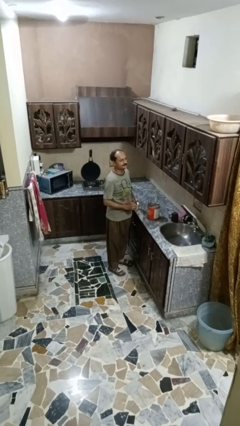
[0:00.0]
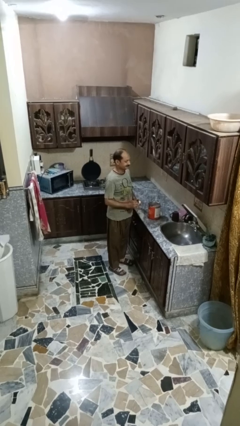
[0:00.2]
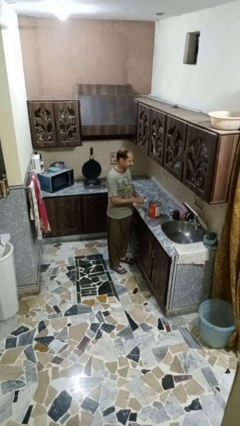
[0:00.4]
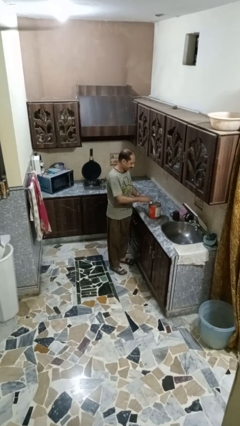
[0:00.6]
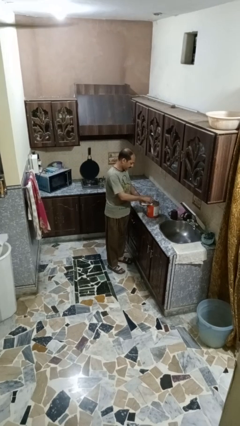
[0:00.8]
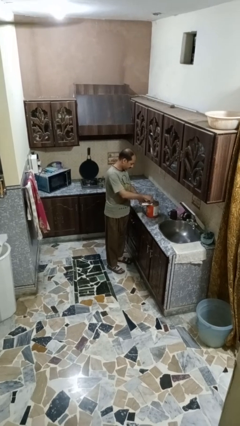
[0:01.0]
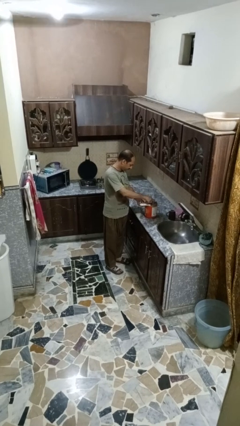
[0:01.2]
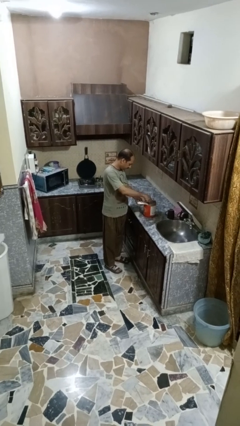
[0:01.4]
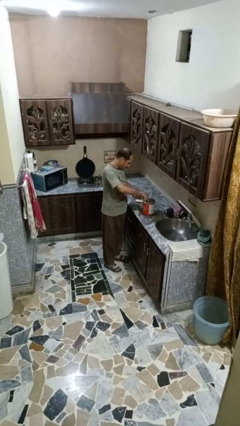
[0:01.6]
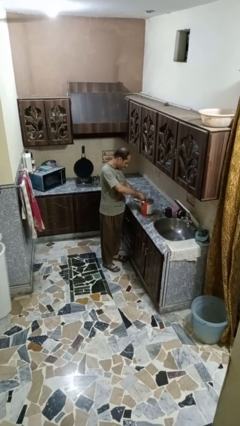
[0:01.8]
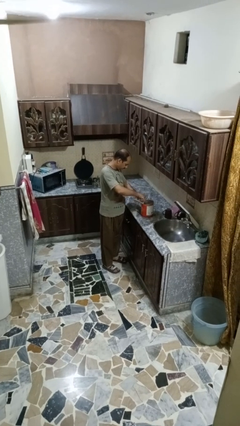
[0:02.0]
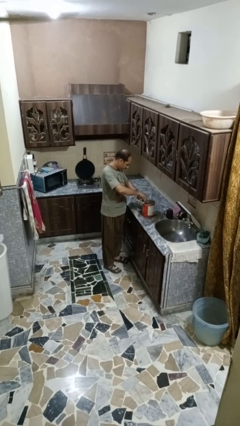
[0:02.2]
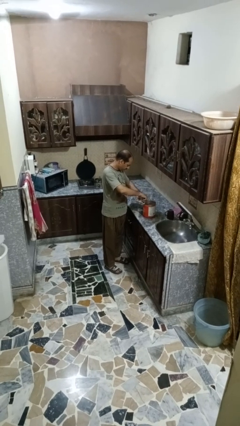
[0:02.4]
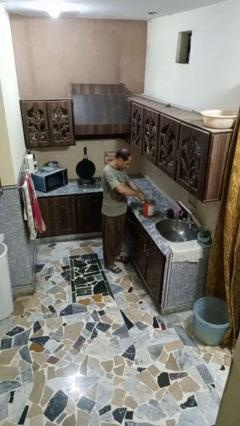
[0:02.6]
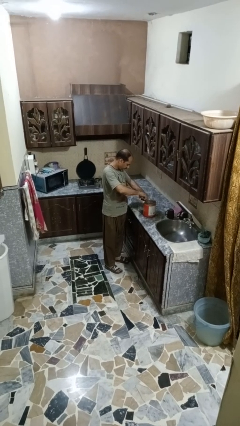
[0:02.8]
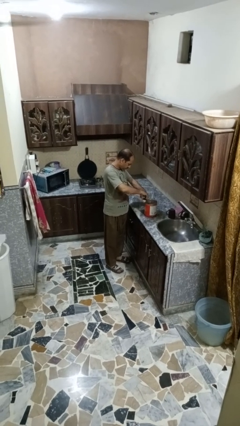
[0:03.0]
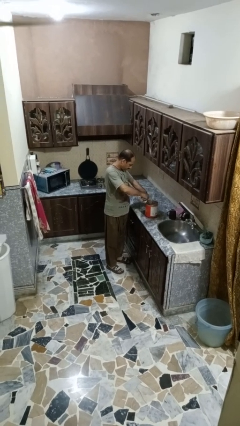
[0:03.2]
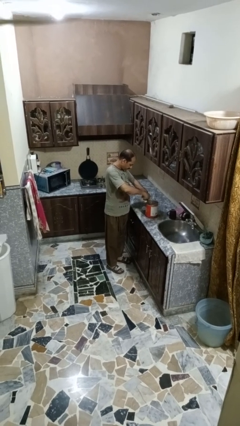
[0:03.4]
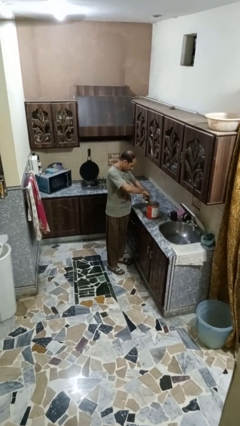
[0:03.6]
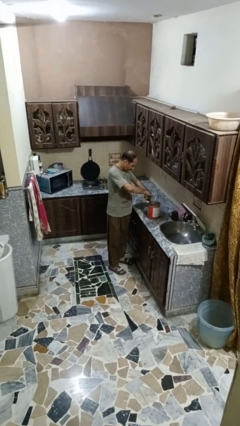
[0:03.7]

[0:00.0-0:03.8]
person opens can with can opener

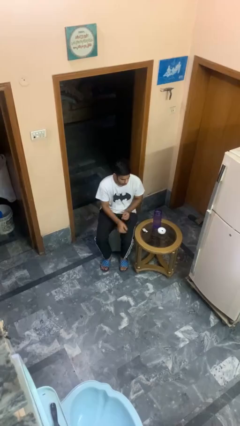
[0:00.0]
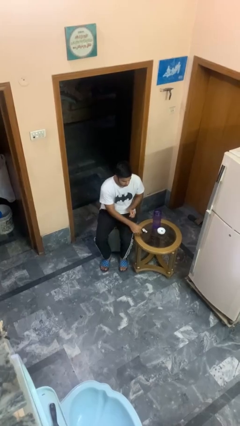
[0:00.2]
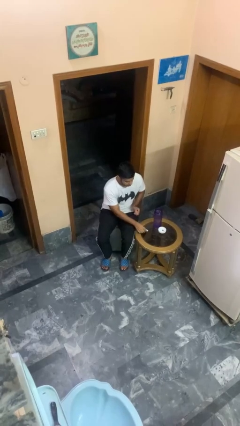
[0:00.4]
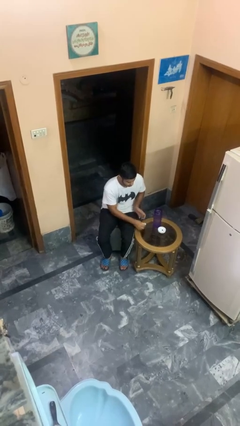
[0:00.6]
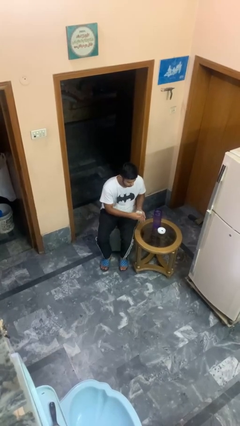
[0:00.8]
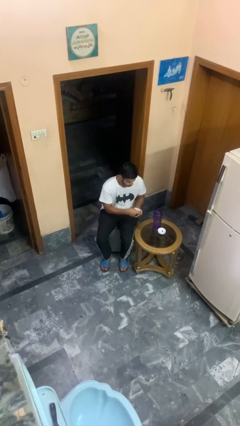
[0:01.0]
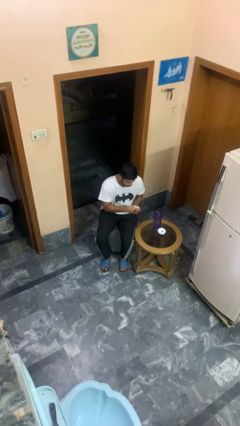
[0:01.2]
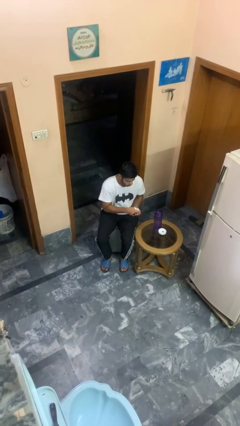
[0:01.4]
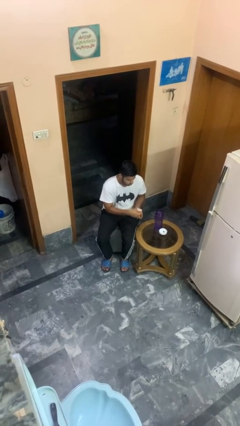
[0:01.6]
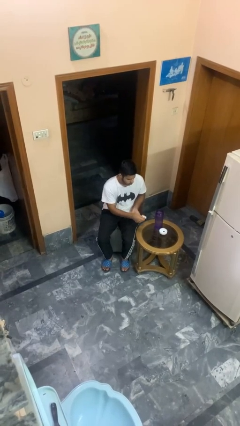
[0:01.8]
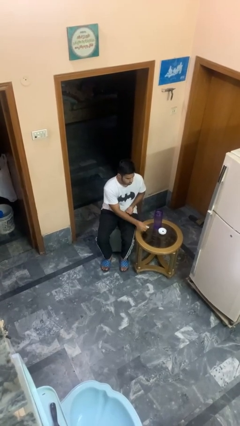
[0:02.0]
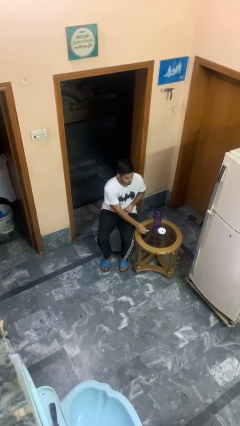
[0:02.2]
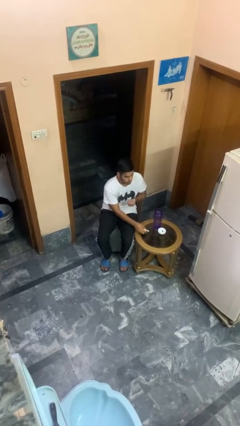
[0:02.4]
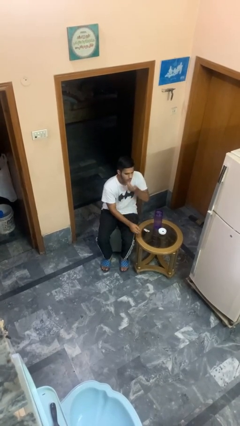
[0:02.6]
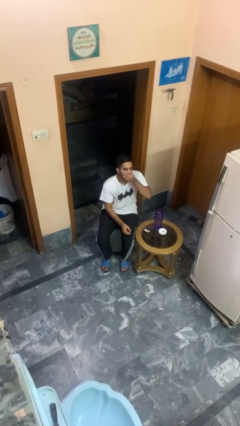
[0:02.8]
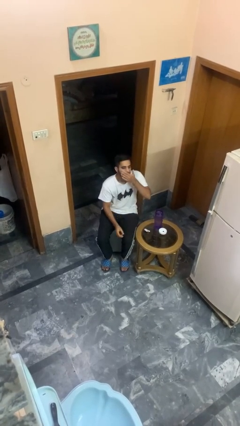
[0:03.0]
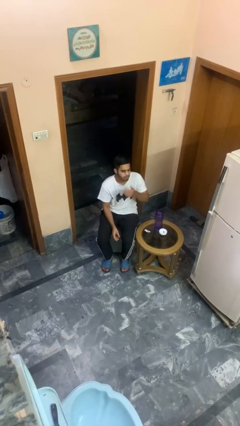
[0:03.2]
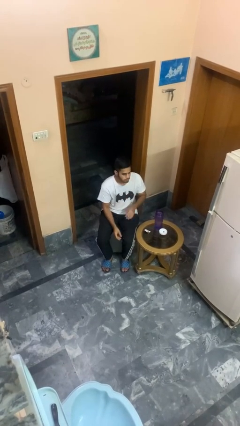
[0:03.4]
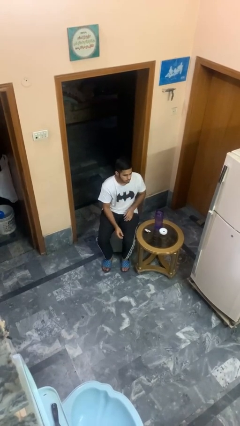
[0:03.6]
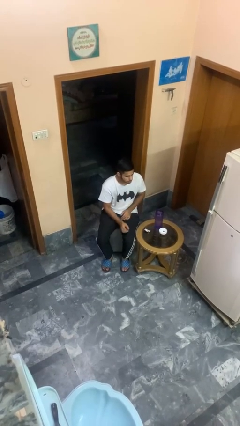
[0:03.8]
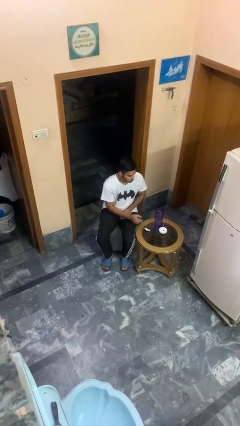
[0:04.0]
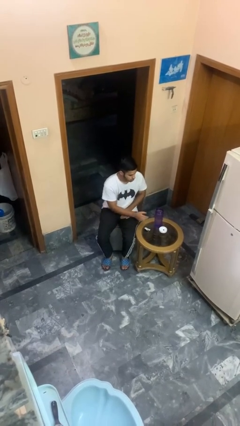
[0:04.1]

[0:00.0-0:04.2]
person takes medicine pills

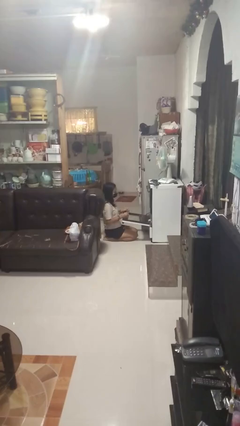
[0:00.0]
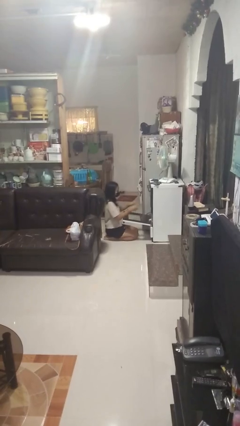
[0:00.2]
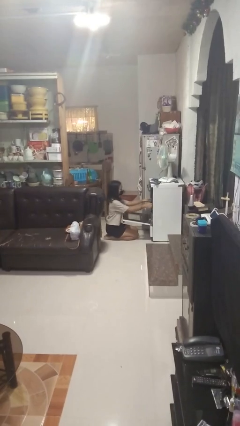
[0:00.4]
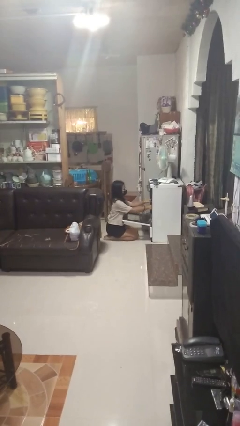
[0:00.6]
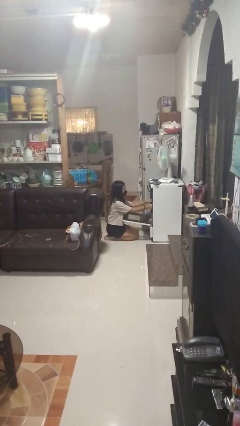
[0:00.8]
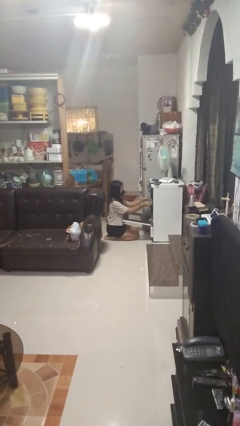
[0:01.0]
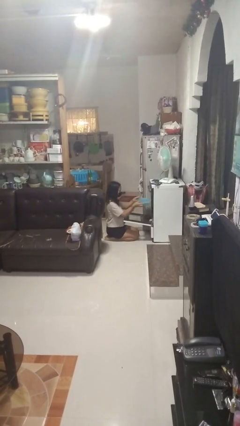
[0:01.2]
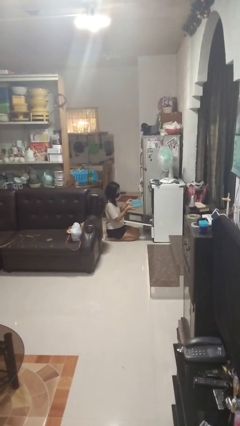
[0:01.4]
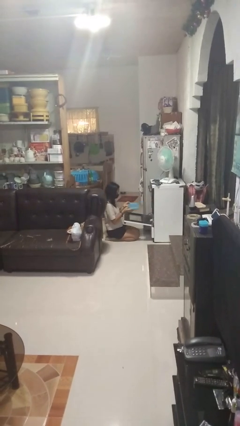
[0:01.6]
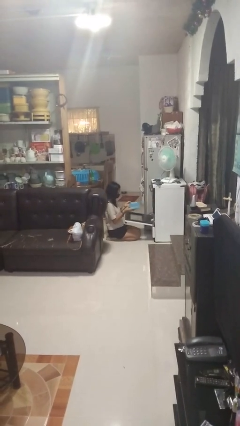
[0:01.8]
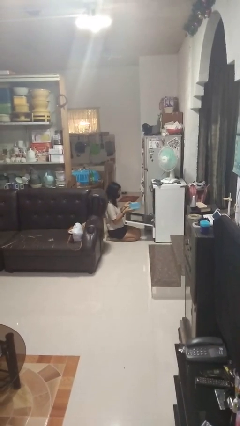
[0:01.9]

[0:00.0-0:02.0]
person takes object from oven

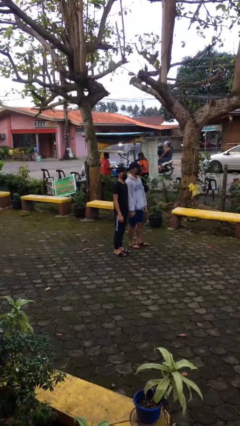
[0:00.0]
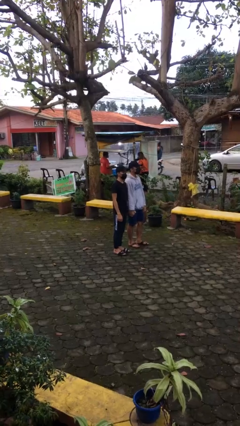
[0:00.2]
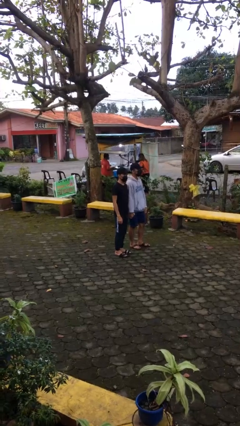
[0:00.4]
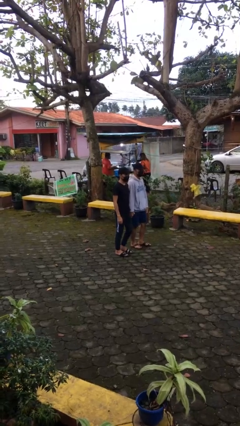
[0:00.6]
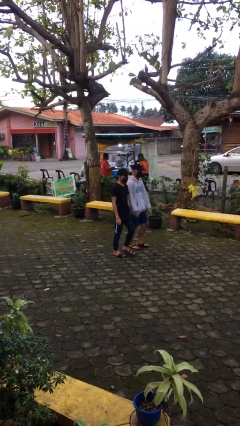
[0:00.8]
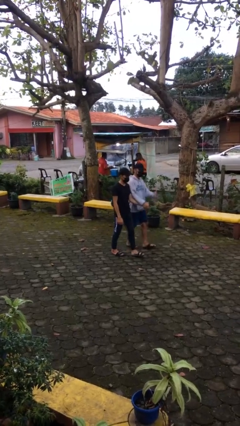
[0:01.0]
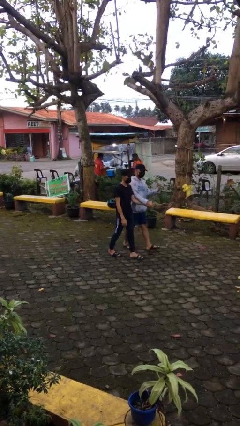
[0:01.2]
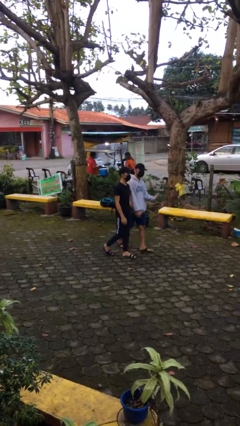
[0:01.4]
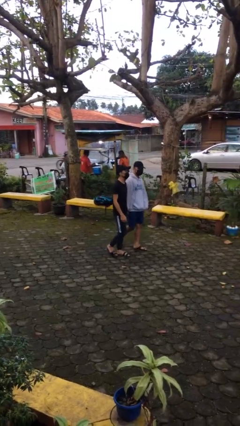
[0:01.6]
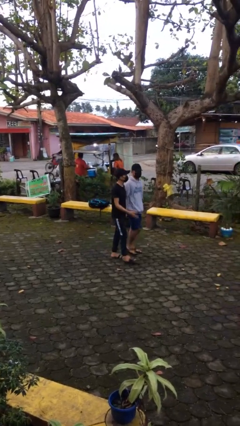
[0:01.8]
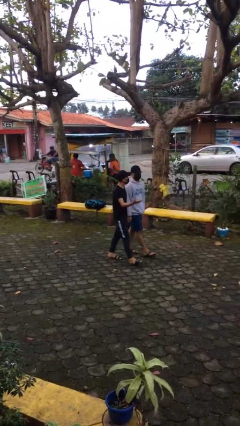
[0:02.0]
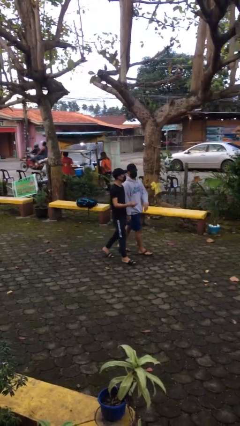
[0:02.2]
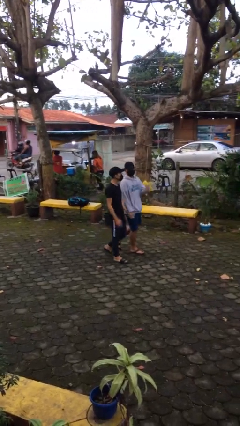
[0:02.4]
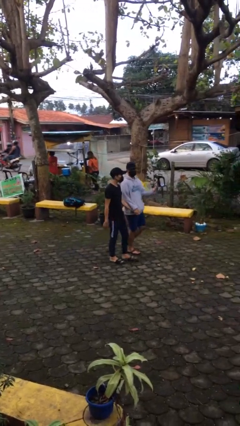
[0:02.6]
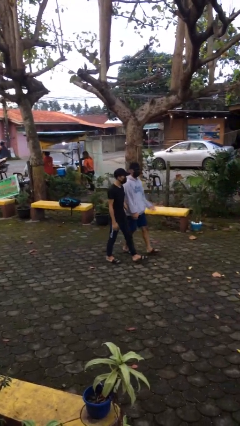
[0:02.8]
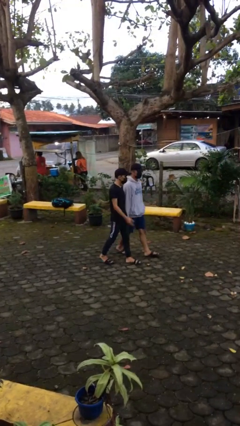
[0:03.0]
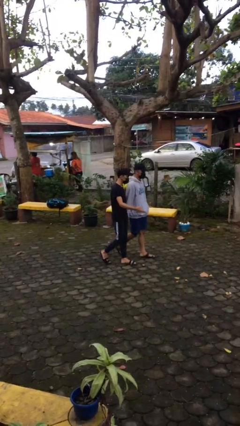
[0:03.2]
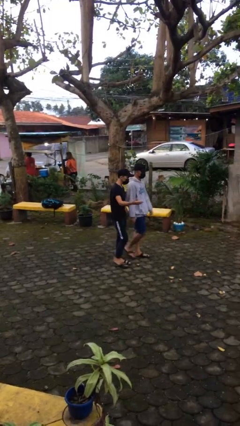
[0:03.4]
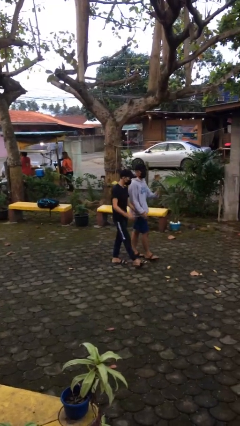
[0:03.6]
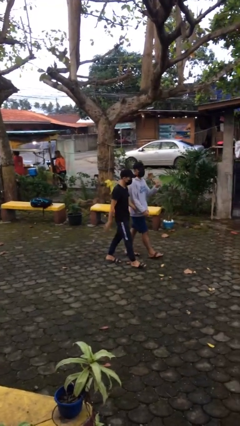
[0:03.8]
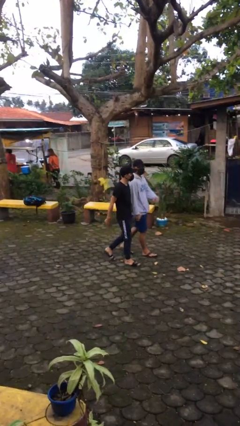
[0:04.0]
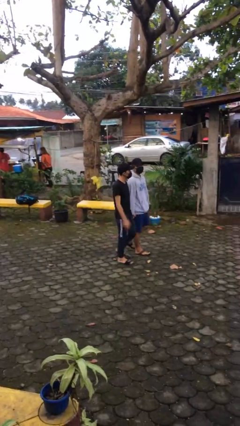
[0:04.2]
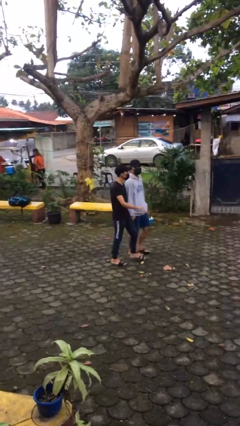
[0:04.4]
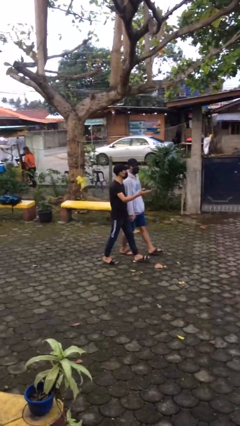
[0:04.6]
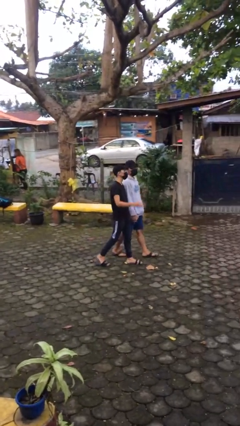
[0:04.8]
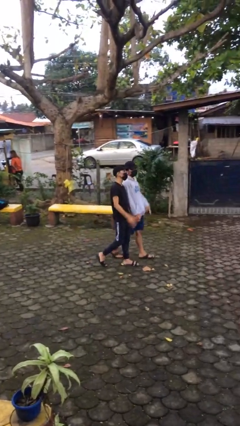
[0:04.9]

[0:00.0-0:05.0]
person holds hand

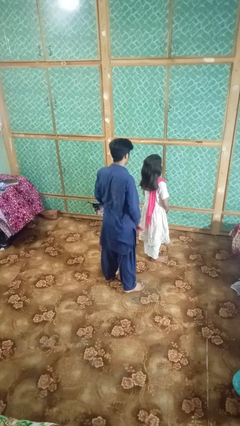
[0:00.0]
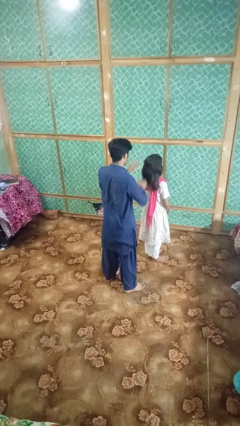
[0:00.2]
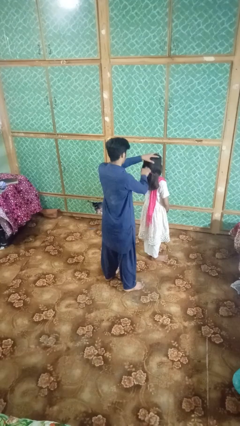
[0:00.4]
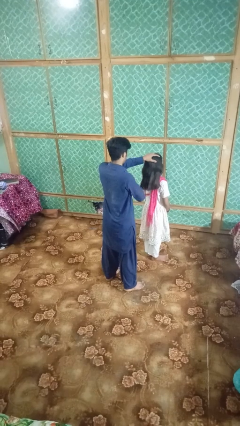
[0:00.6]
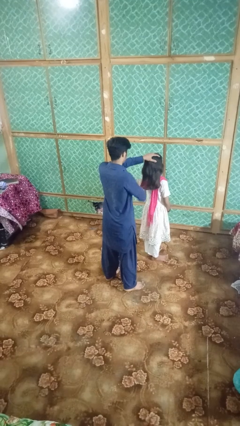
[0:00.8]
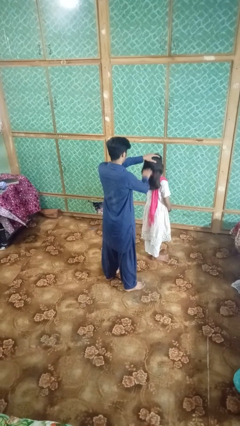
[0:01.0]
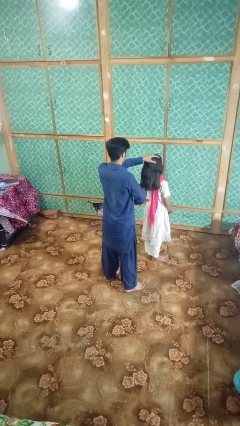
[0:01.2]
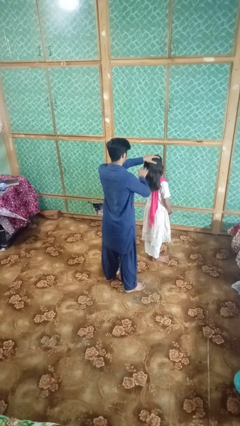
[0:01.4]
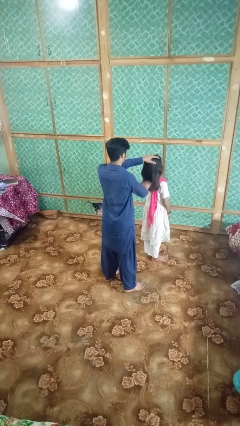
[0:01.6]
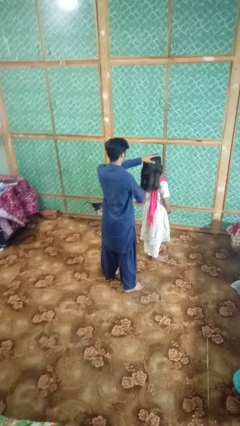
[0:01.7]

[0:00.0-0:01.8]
person brushes hair of person

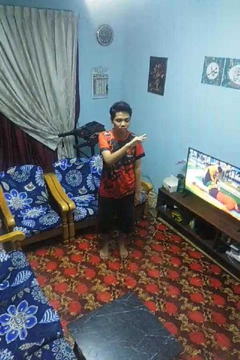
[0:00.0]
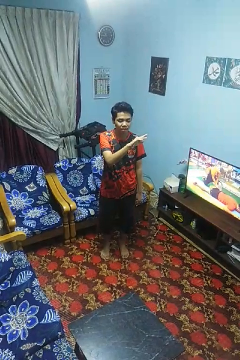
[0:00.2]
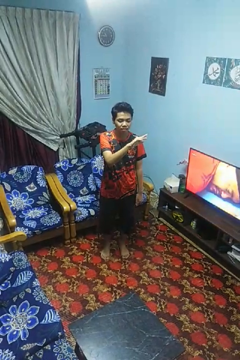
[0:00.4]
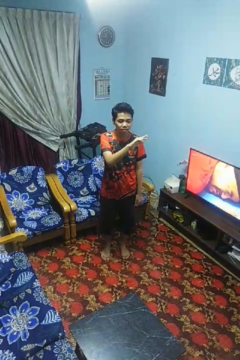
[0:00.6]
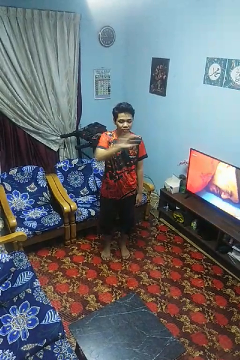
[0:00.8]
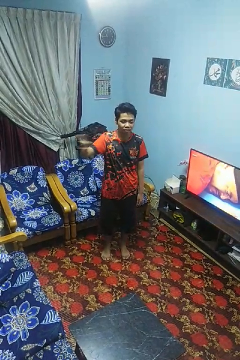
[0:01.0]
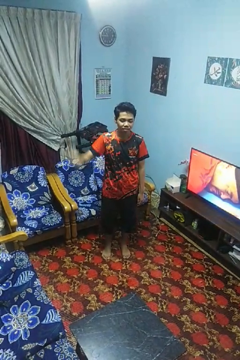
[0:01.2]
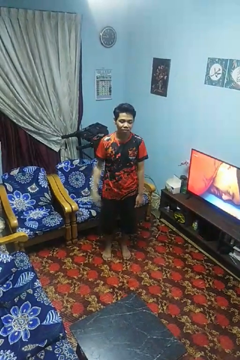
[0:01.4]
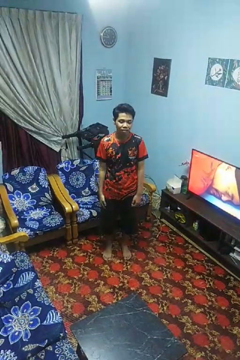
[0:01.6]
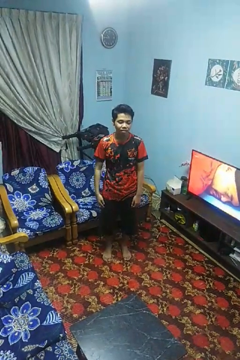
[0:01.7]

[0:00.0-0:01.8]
person gestures swipe right
